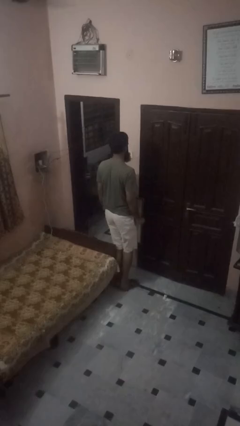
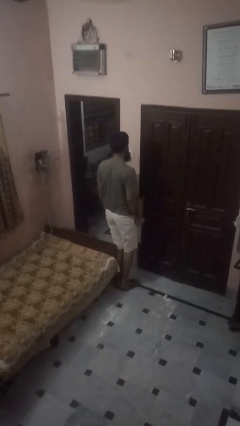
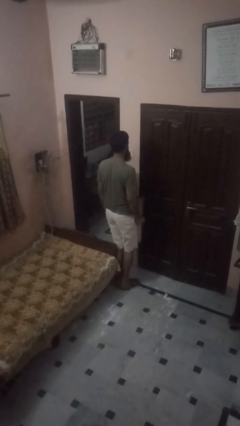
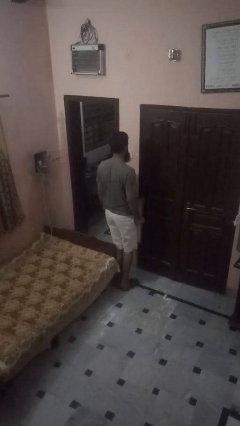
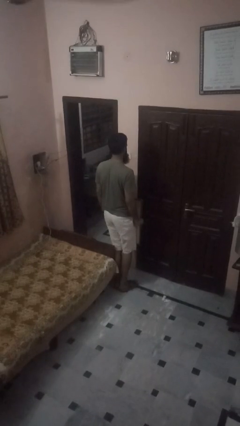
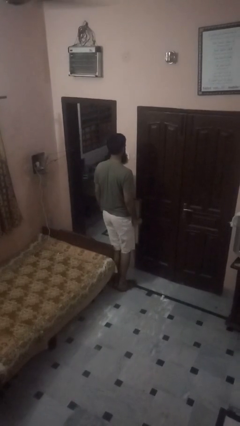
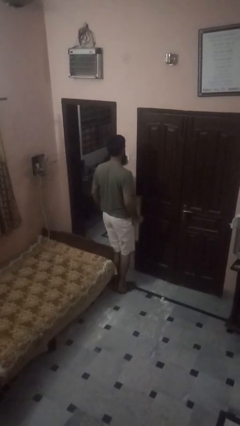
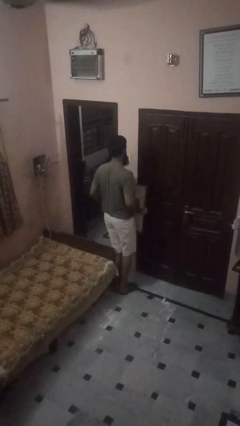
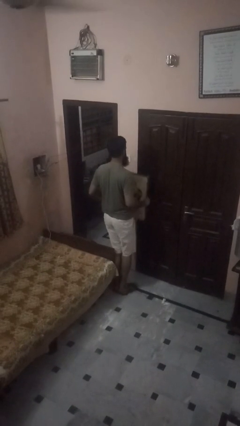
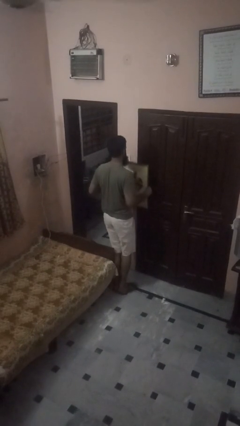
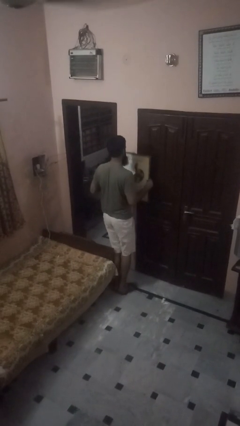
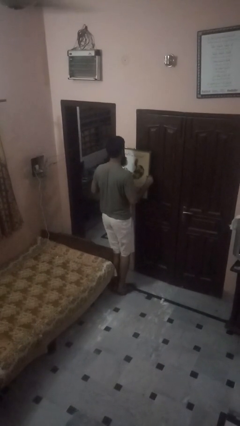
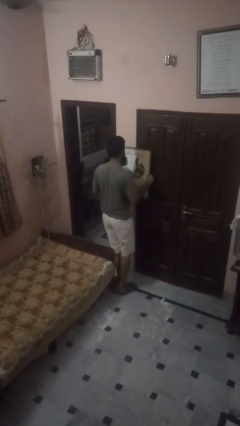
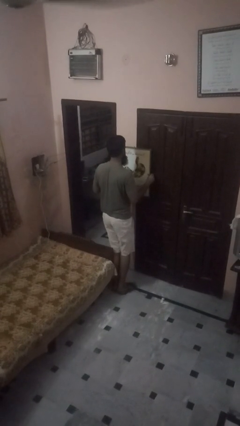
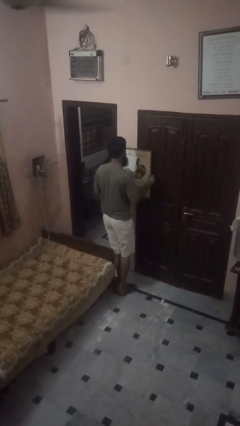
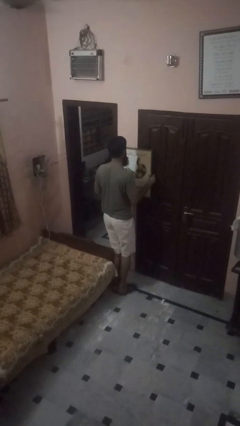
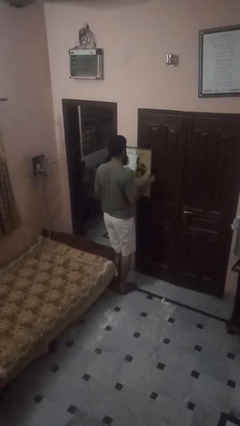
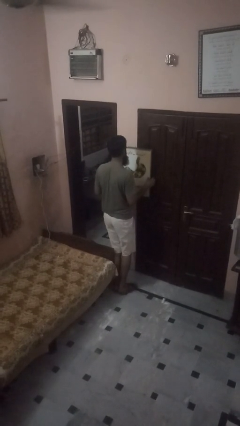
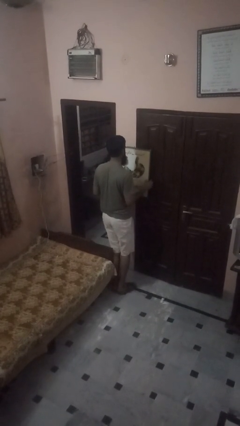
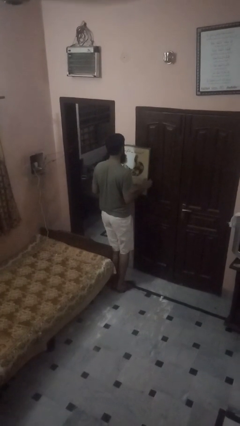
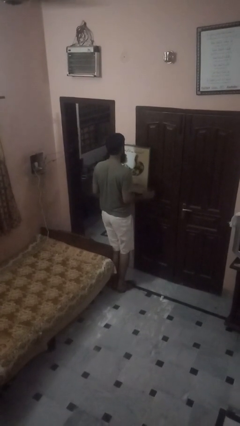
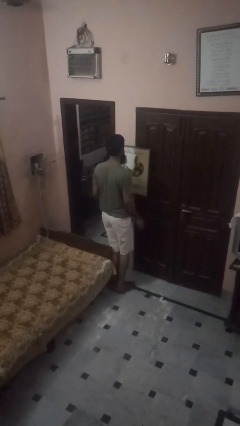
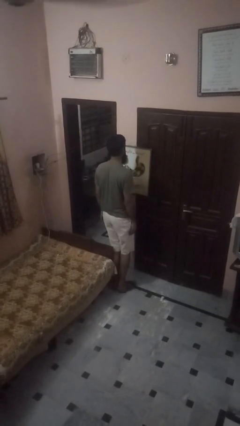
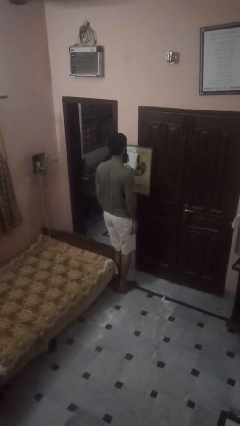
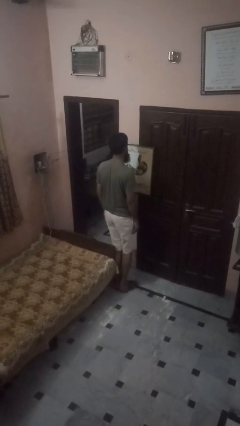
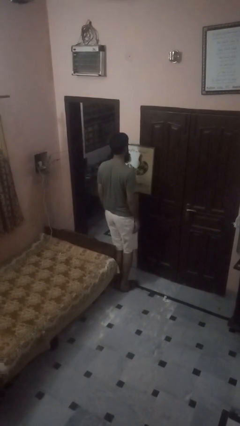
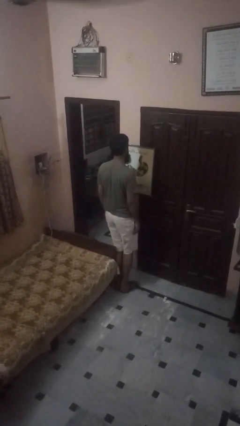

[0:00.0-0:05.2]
person puts up picture frame

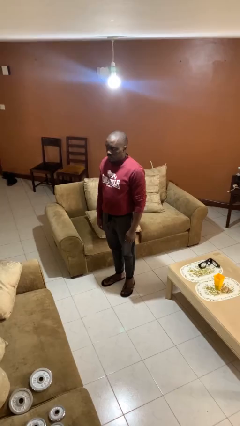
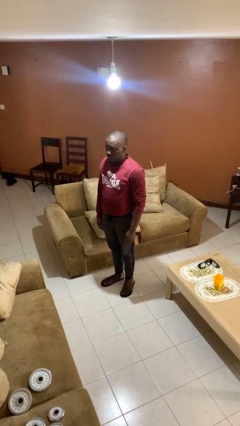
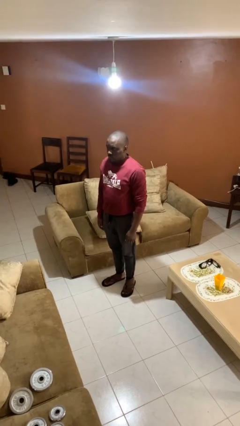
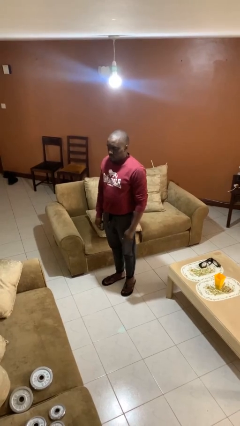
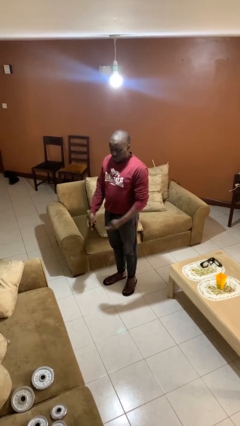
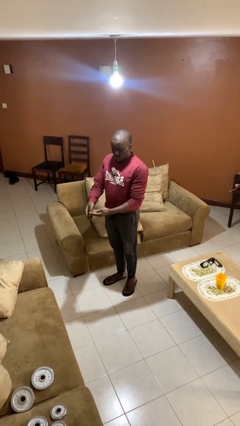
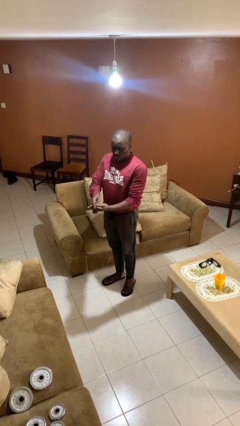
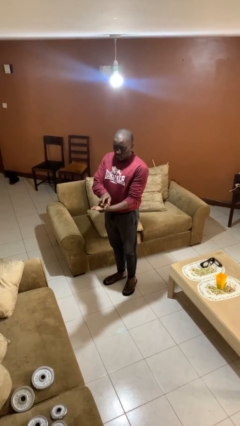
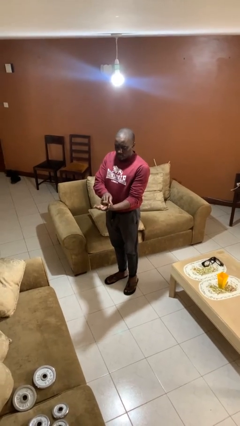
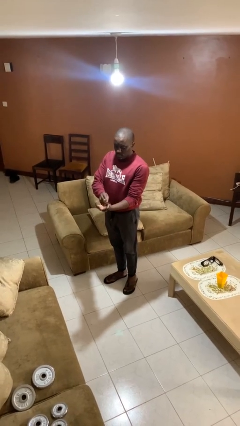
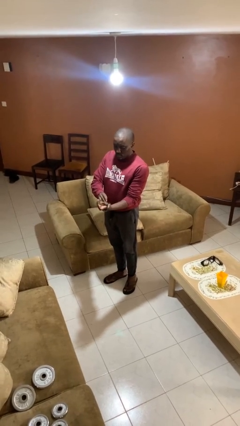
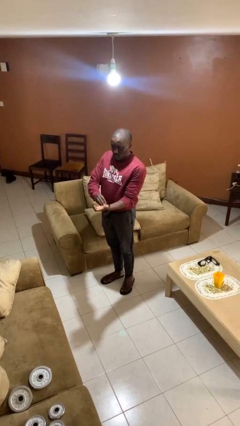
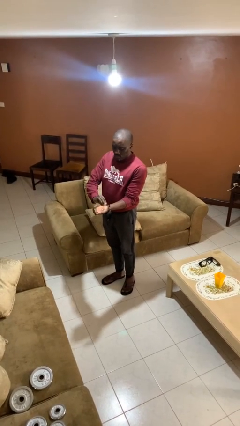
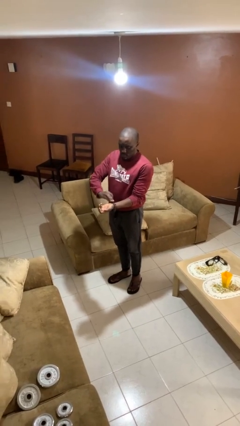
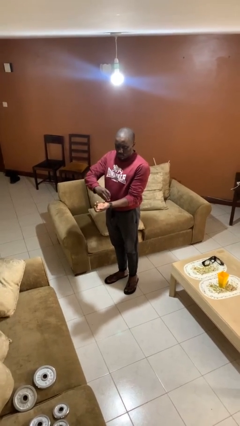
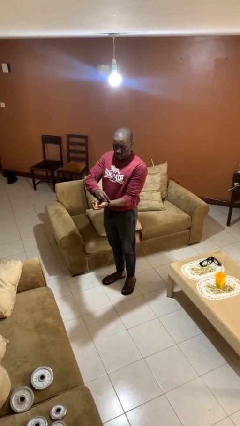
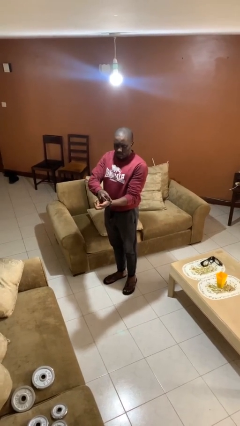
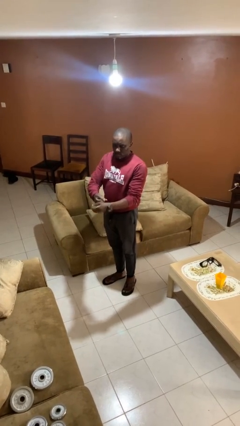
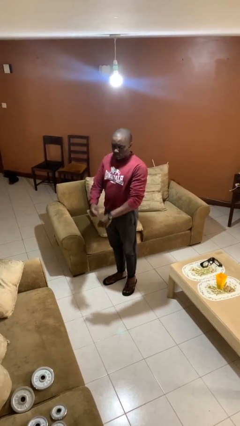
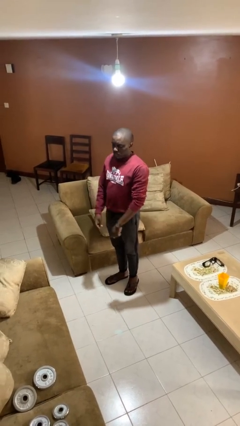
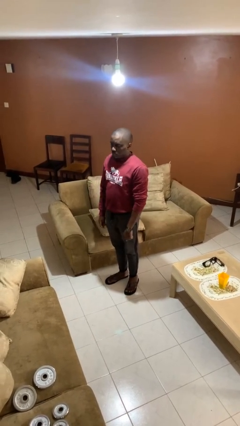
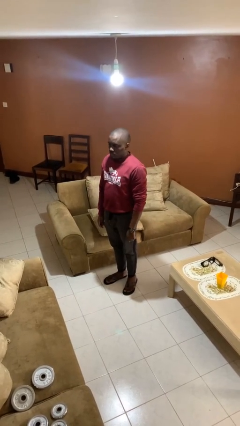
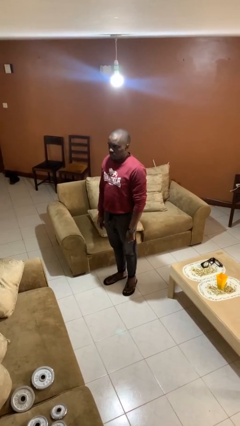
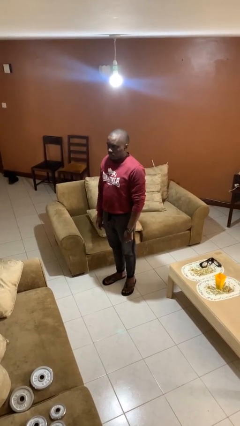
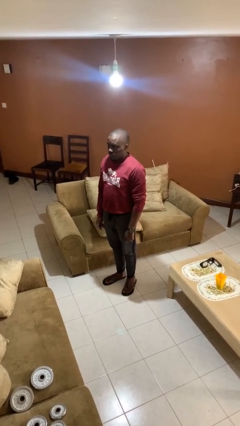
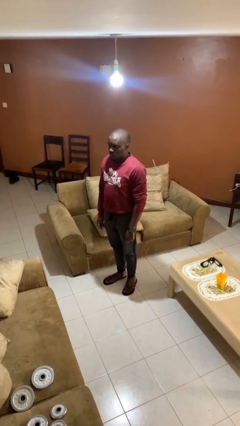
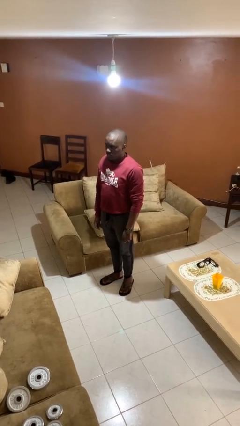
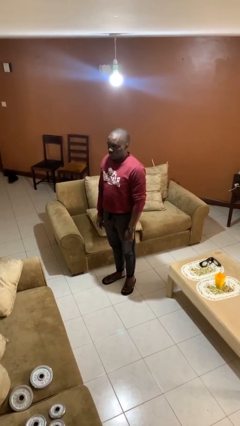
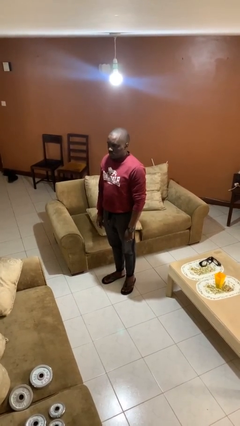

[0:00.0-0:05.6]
person puts on wristwatch

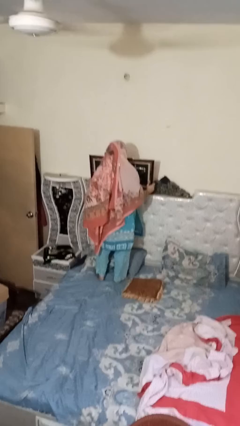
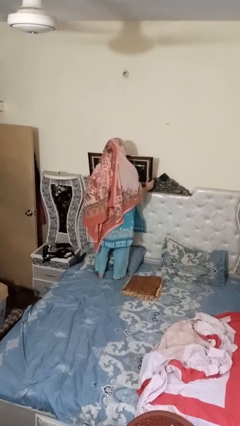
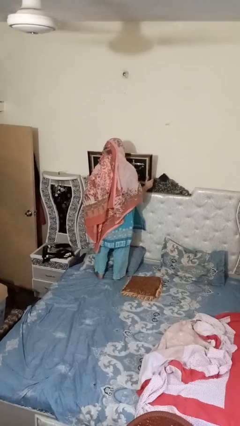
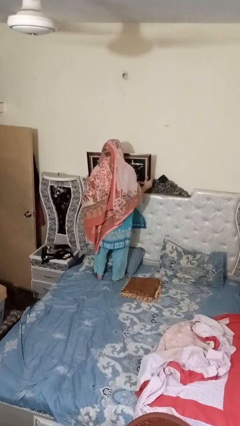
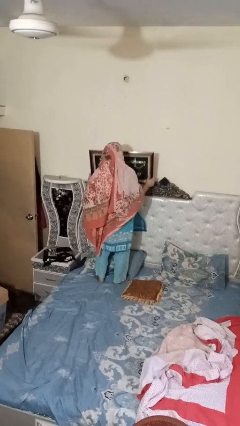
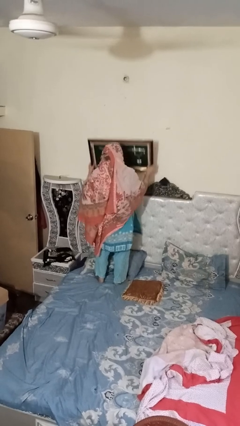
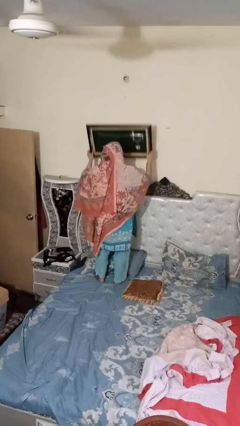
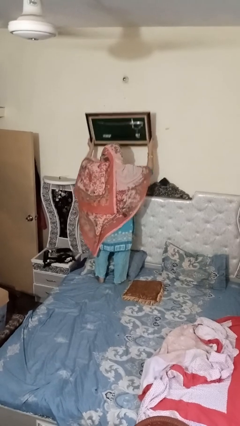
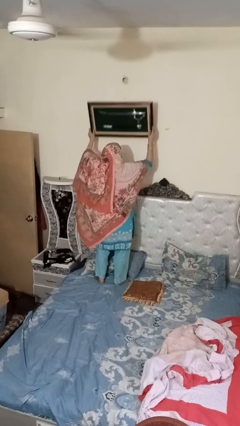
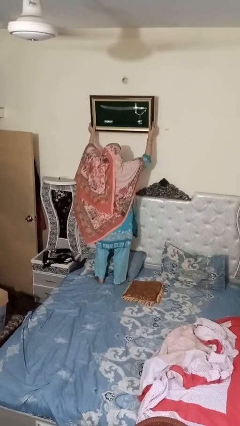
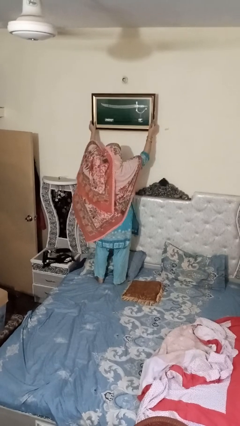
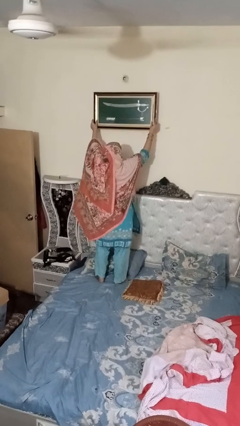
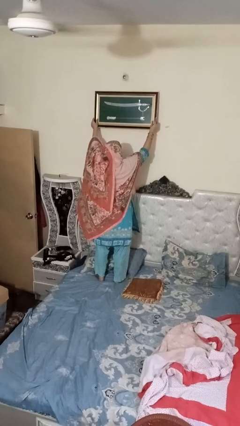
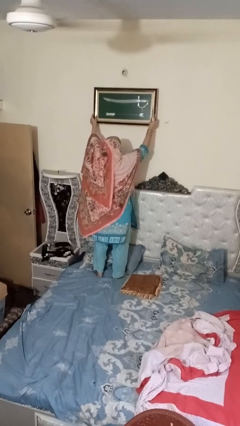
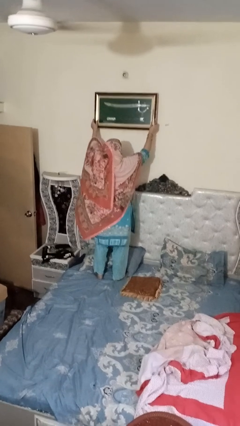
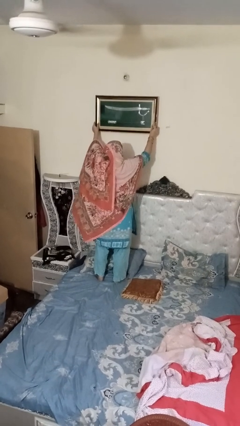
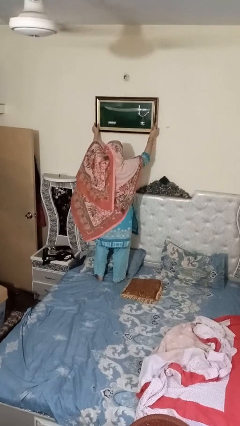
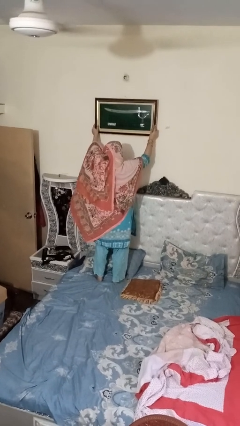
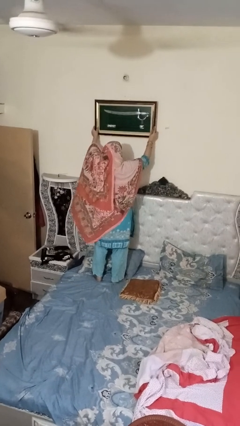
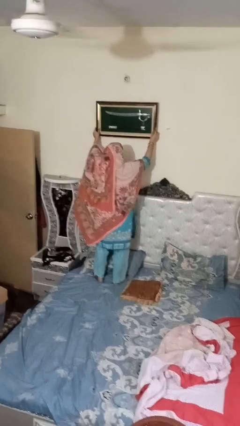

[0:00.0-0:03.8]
person takes down picture frame

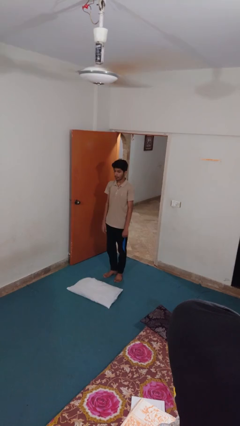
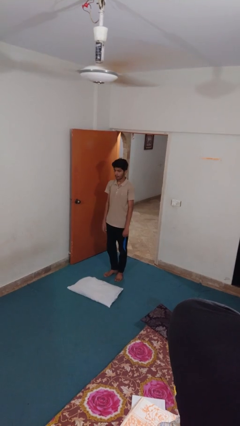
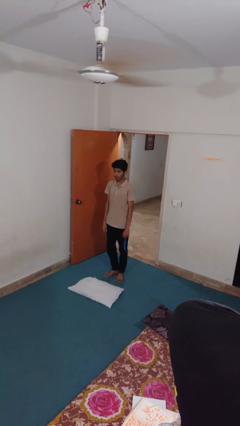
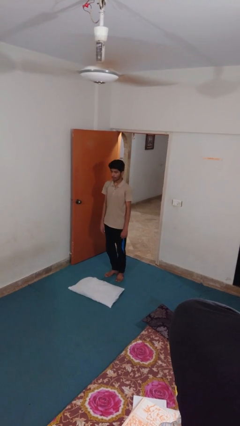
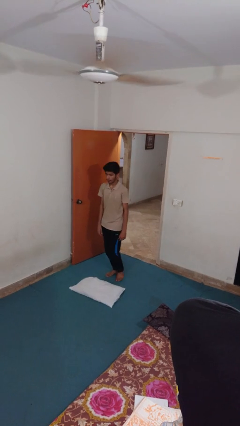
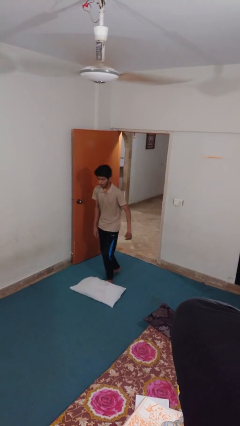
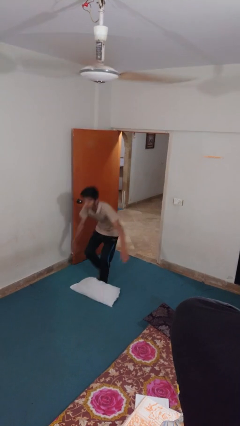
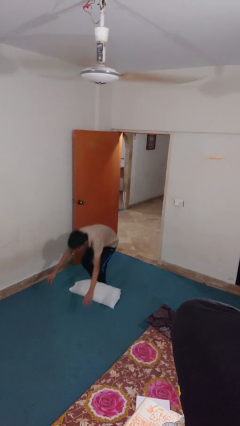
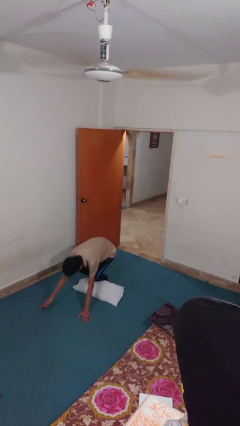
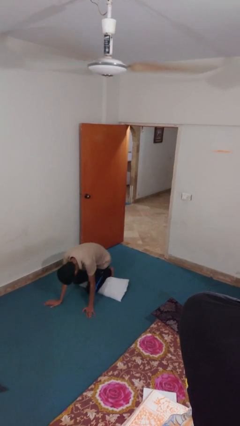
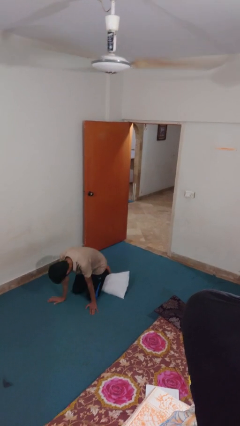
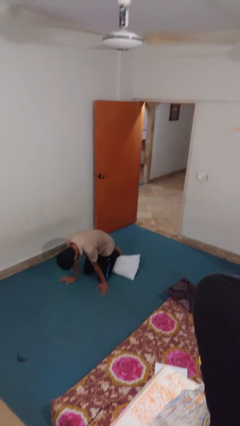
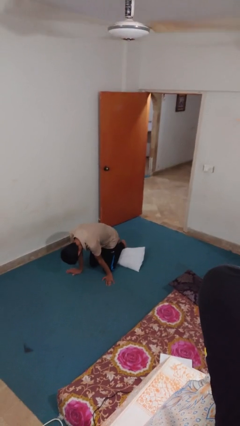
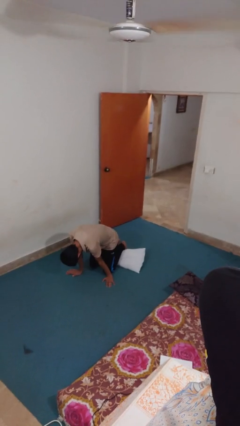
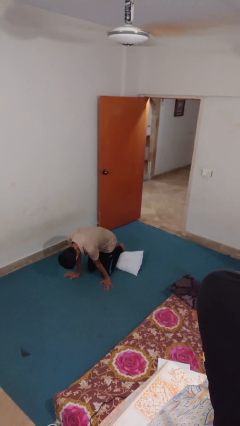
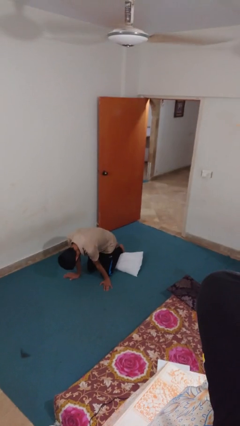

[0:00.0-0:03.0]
person trips on object on floor

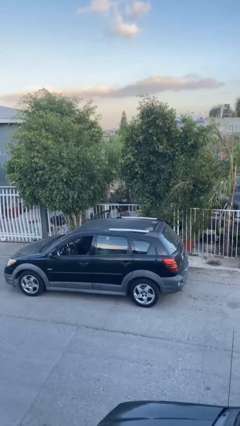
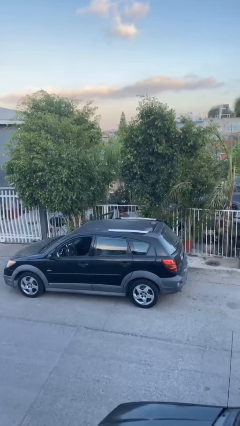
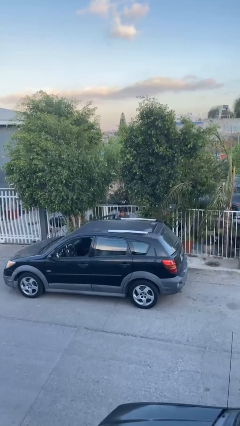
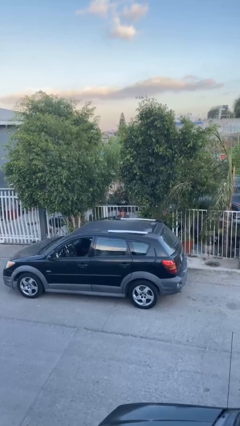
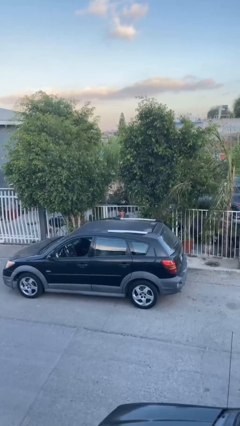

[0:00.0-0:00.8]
person closes car door
